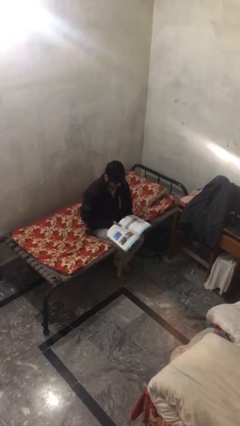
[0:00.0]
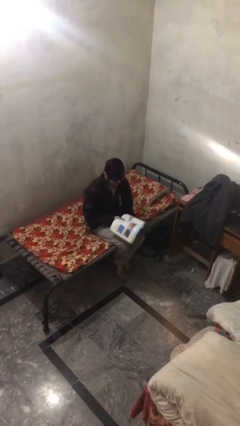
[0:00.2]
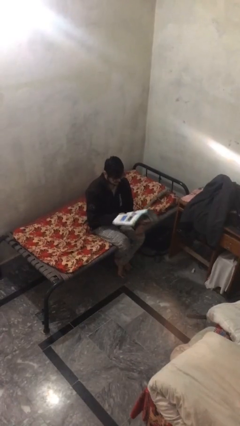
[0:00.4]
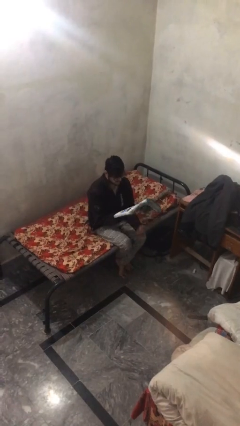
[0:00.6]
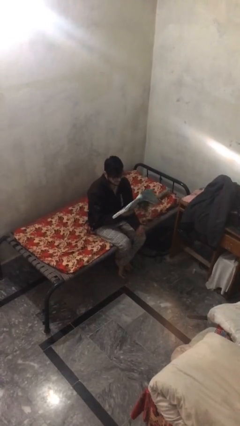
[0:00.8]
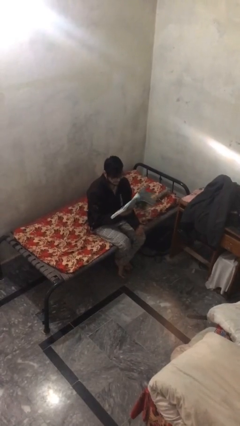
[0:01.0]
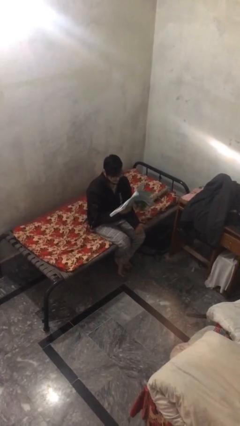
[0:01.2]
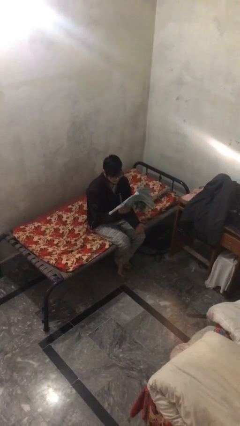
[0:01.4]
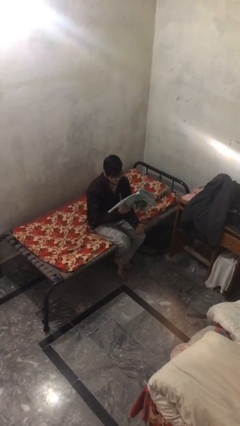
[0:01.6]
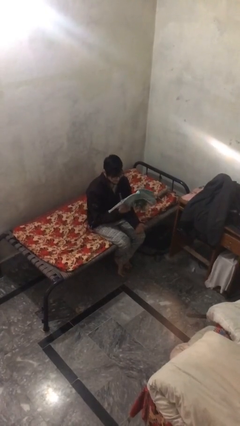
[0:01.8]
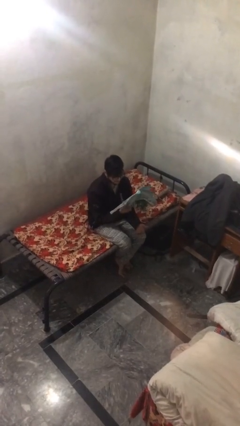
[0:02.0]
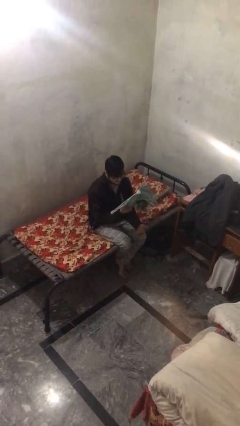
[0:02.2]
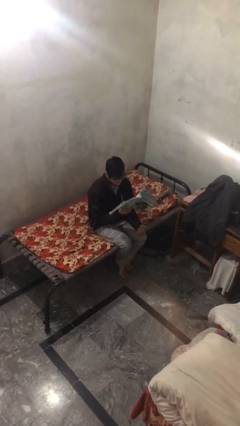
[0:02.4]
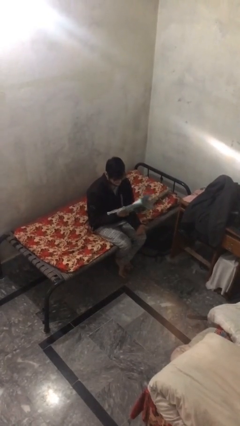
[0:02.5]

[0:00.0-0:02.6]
person reads document

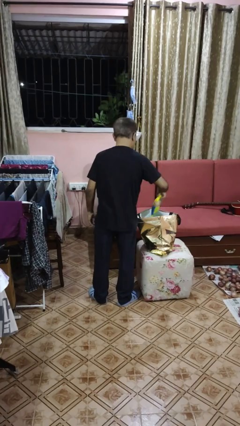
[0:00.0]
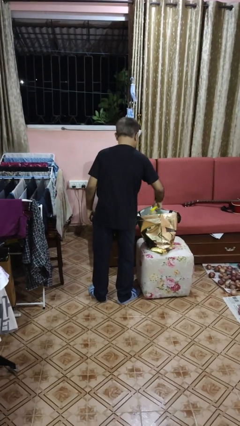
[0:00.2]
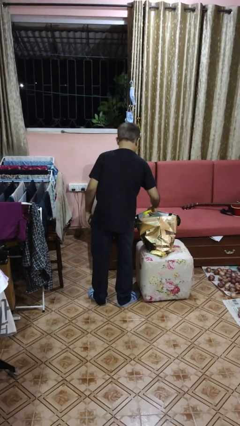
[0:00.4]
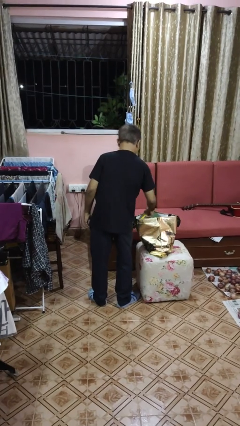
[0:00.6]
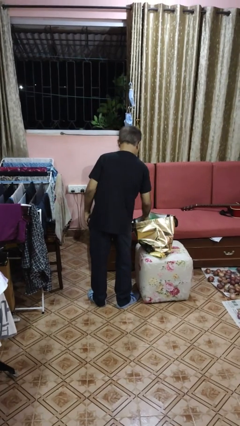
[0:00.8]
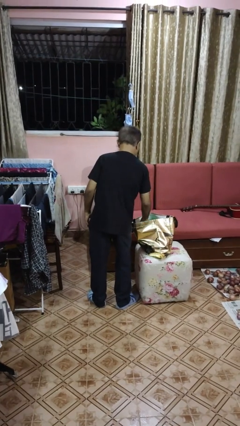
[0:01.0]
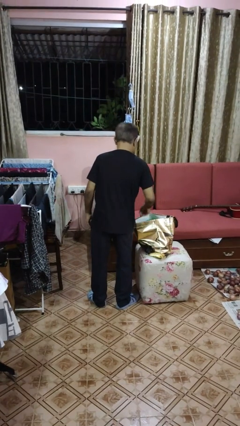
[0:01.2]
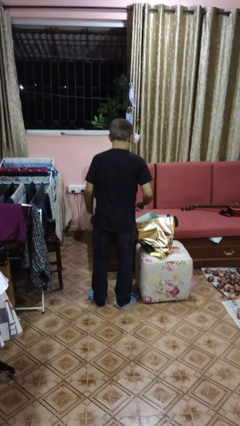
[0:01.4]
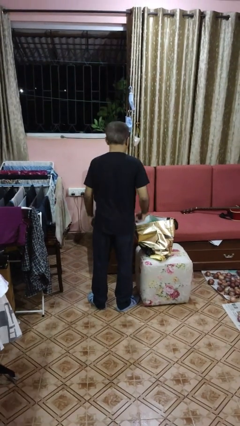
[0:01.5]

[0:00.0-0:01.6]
person puts object into bag

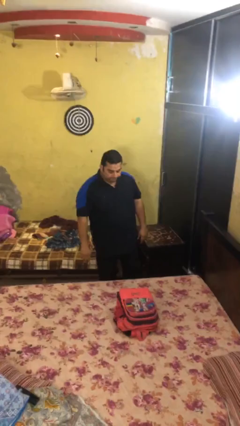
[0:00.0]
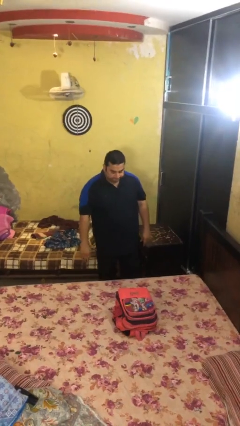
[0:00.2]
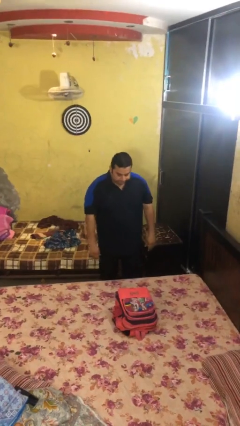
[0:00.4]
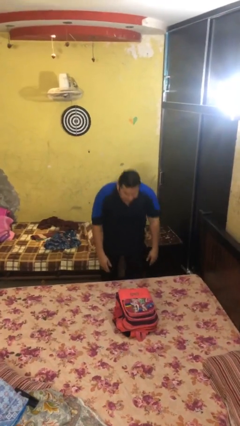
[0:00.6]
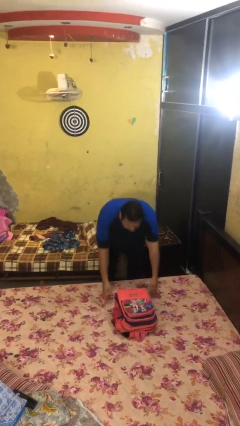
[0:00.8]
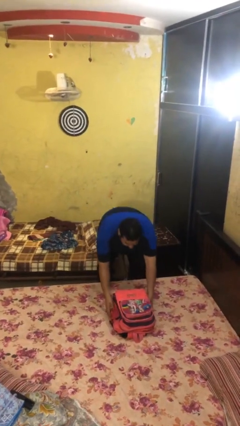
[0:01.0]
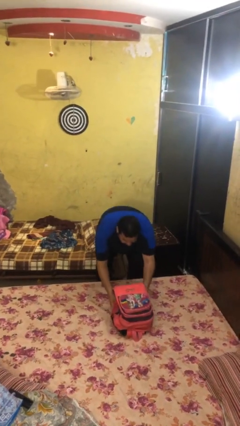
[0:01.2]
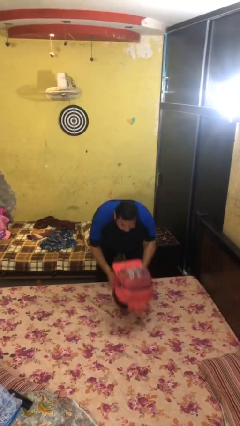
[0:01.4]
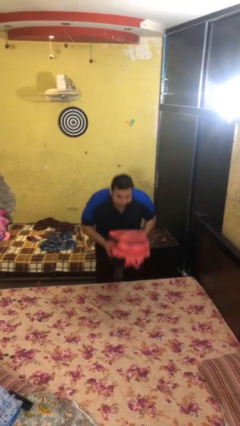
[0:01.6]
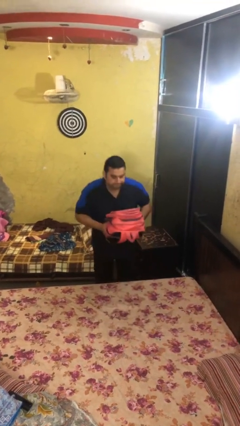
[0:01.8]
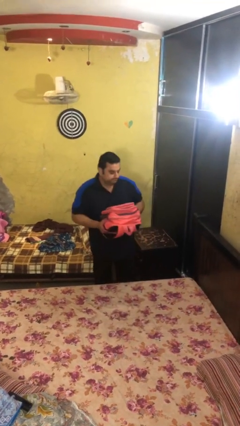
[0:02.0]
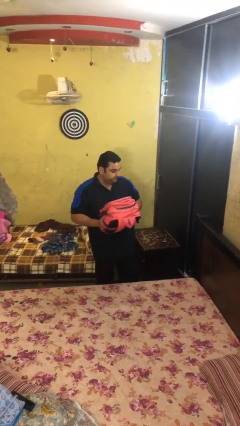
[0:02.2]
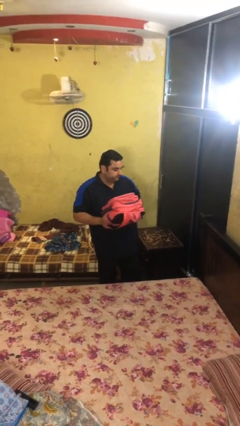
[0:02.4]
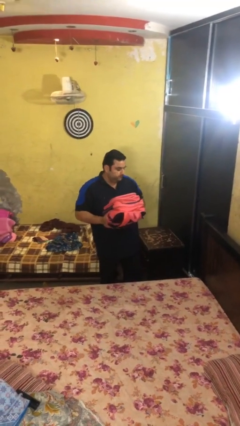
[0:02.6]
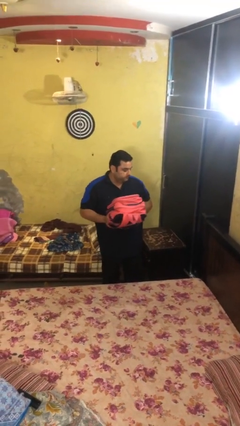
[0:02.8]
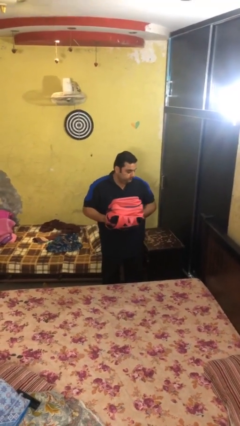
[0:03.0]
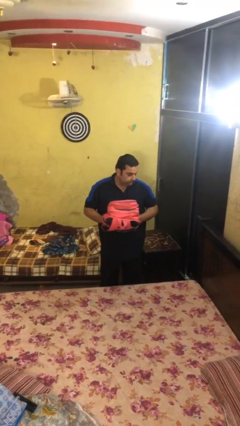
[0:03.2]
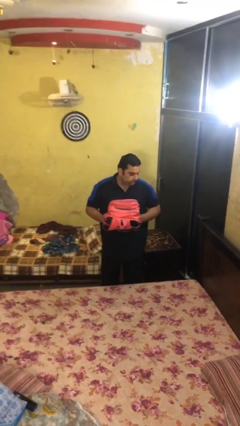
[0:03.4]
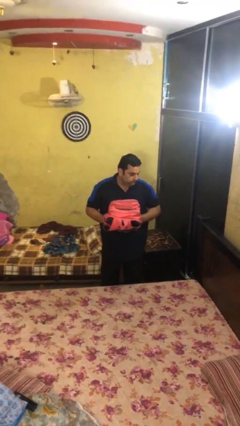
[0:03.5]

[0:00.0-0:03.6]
person picks up object from bed

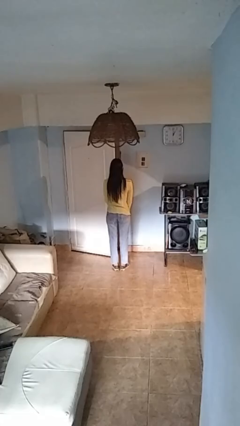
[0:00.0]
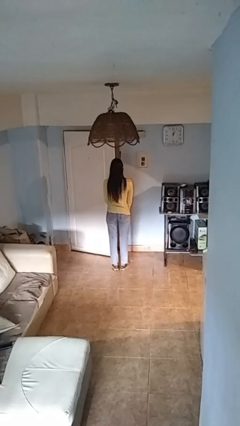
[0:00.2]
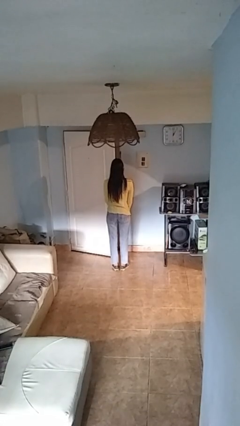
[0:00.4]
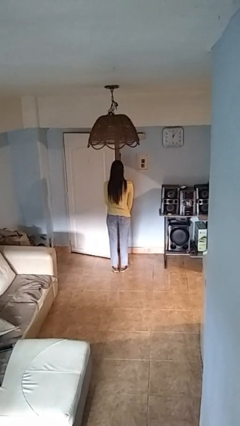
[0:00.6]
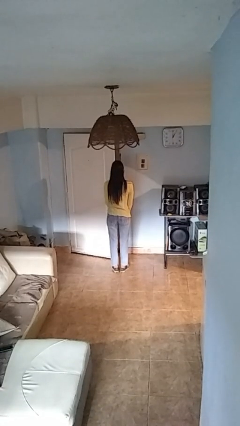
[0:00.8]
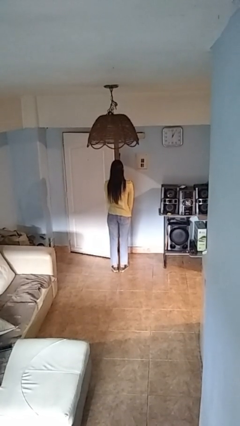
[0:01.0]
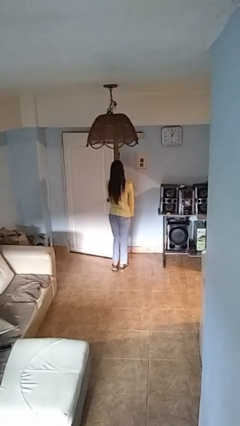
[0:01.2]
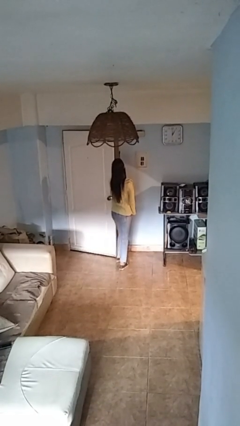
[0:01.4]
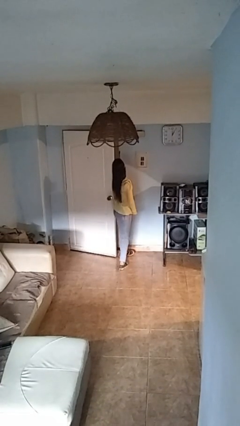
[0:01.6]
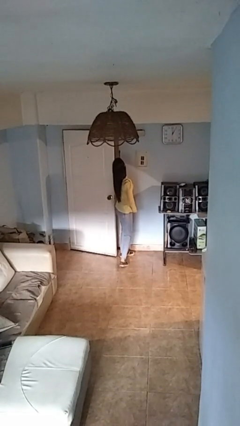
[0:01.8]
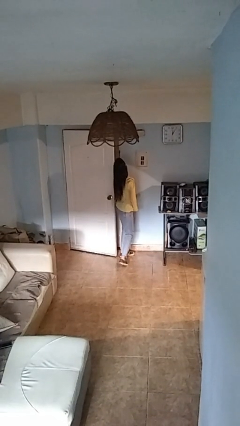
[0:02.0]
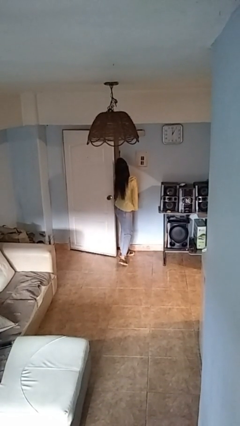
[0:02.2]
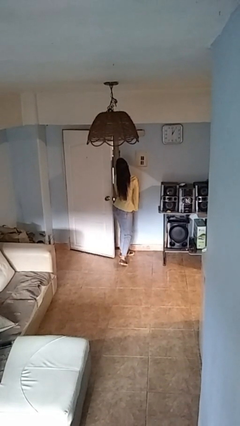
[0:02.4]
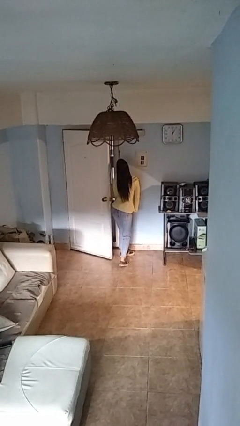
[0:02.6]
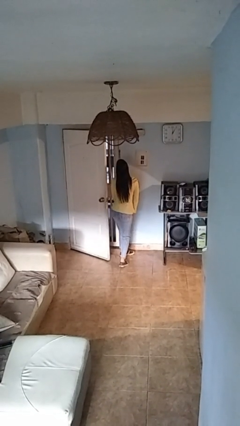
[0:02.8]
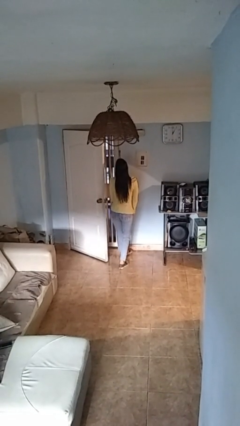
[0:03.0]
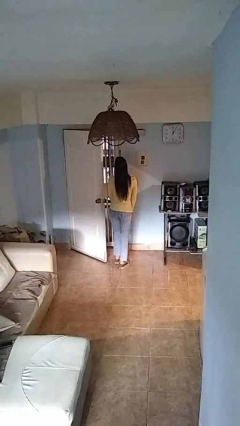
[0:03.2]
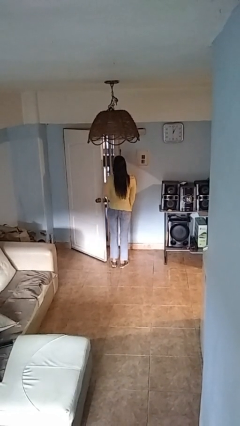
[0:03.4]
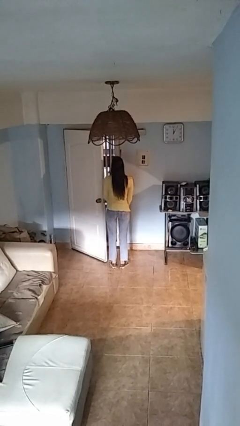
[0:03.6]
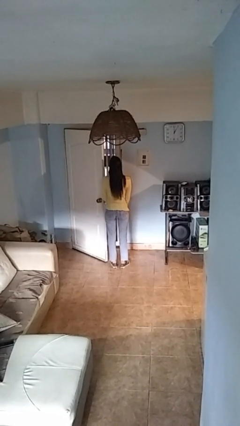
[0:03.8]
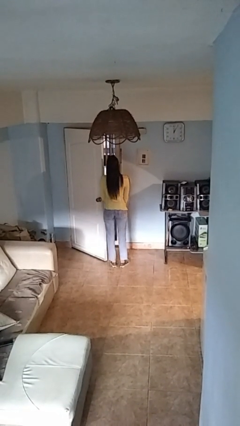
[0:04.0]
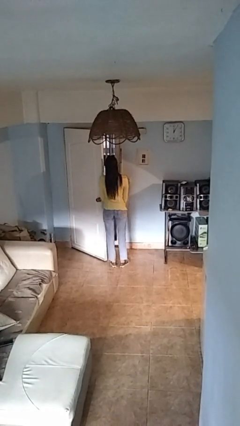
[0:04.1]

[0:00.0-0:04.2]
person opens facility door

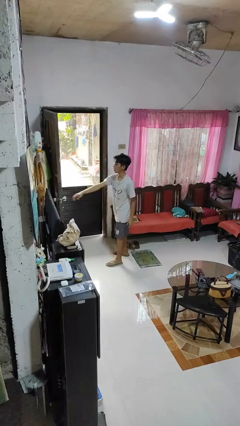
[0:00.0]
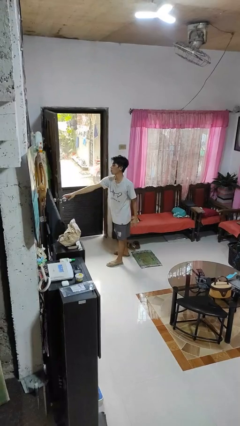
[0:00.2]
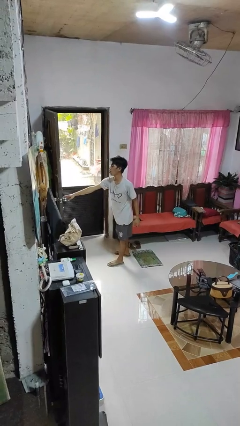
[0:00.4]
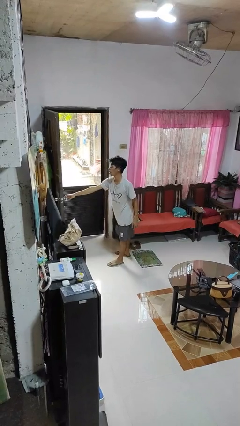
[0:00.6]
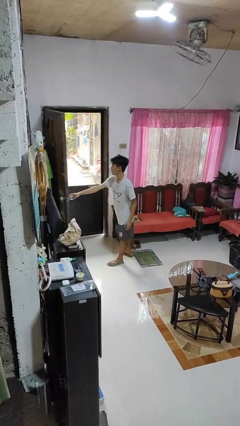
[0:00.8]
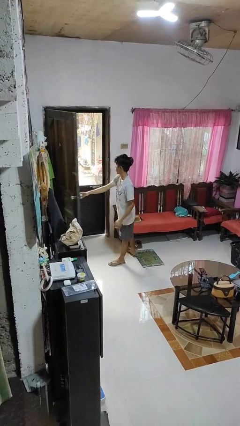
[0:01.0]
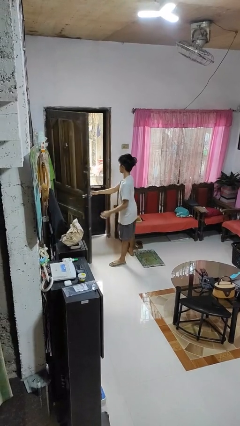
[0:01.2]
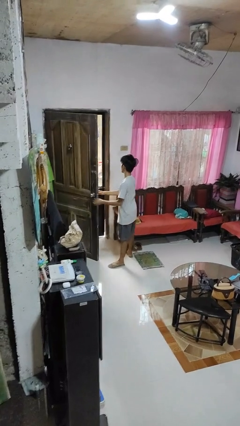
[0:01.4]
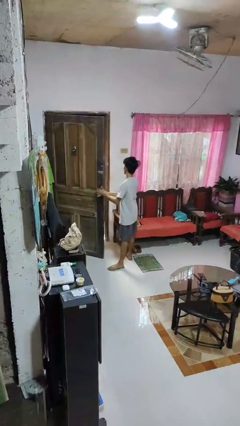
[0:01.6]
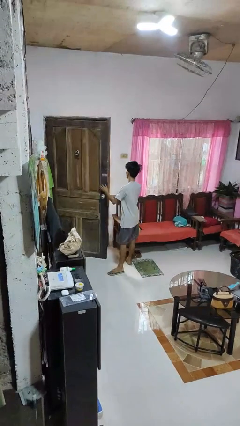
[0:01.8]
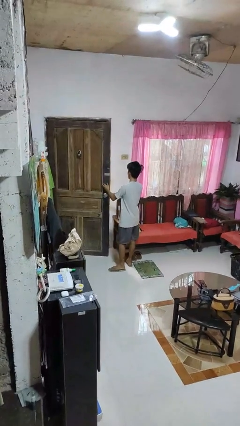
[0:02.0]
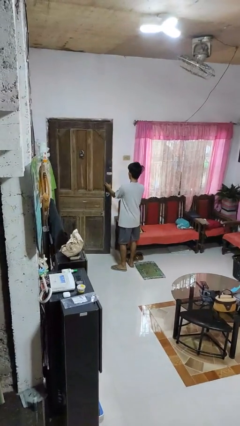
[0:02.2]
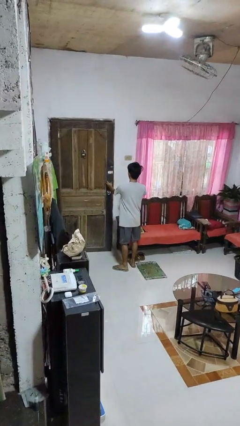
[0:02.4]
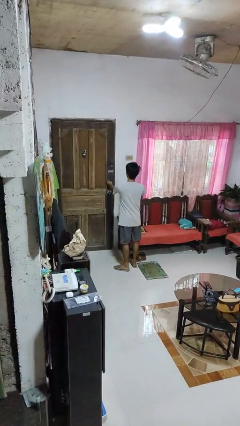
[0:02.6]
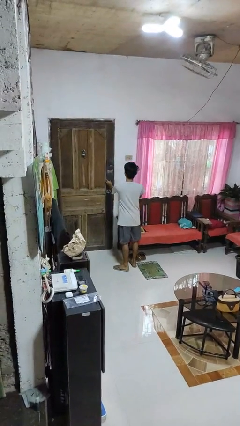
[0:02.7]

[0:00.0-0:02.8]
person closes facility door

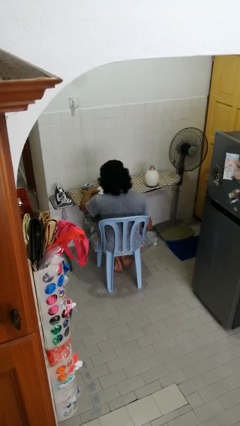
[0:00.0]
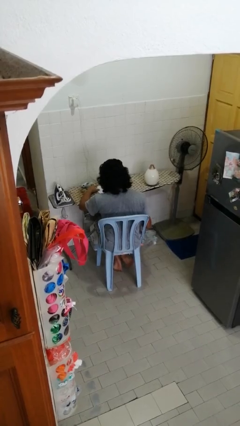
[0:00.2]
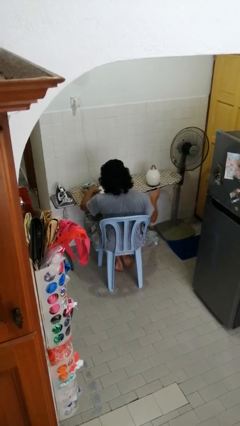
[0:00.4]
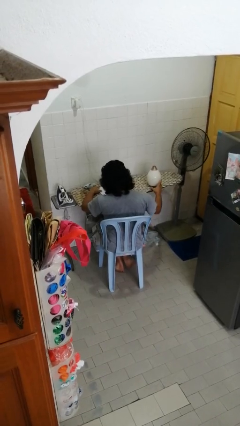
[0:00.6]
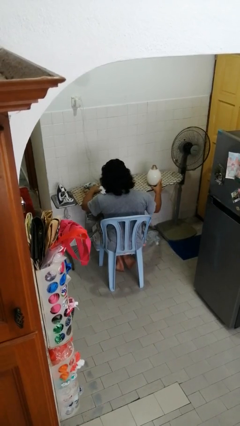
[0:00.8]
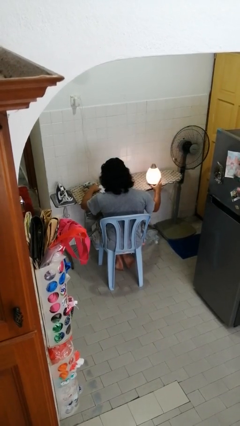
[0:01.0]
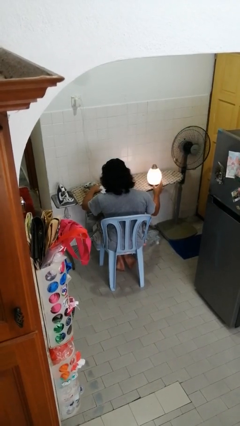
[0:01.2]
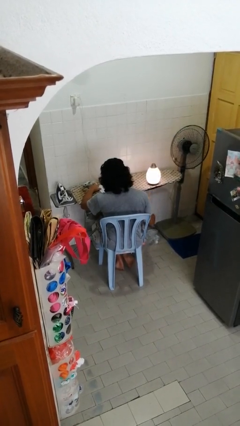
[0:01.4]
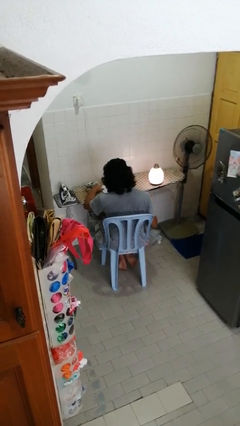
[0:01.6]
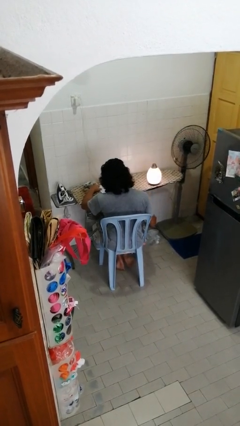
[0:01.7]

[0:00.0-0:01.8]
person turns on lamp

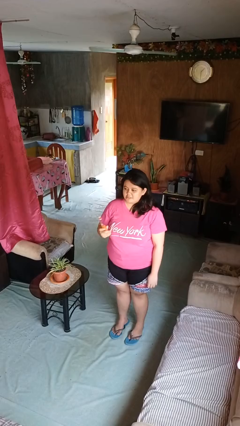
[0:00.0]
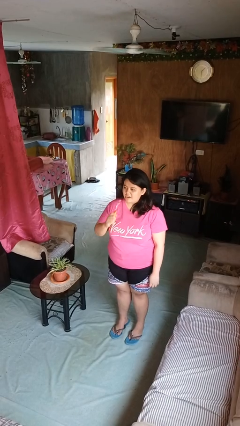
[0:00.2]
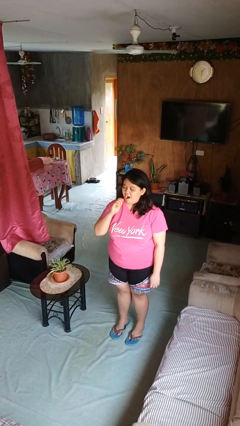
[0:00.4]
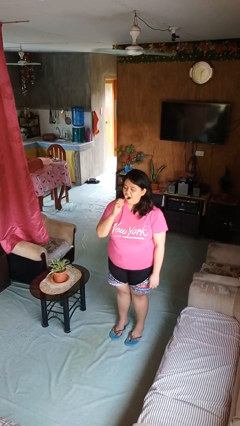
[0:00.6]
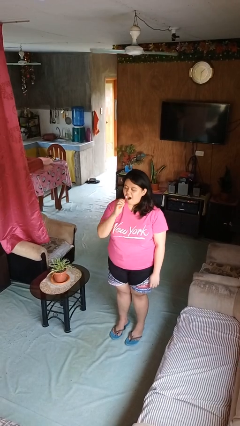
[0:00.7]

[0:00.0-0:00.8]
person brushes teeth
